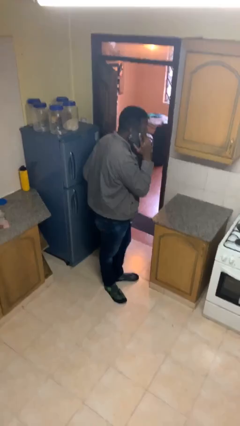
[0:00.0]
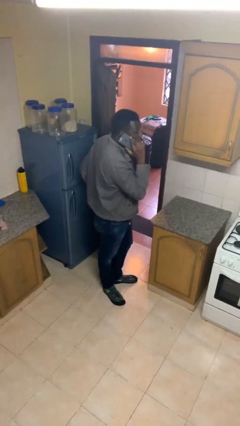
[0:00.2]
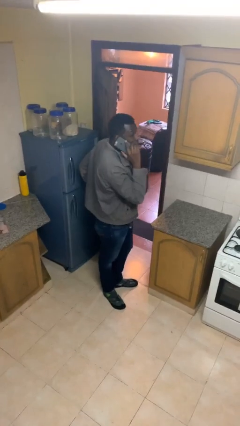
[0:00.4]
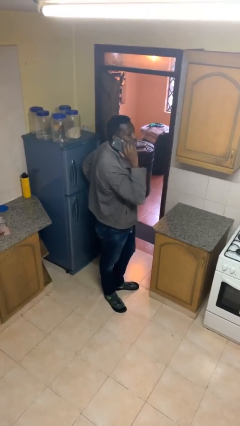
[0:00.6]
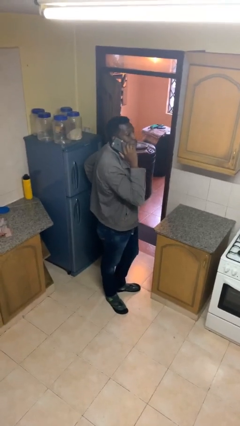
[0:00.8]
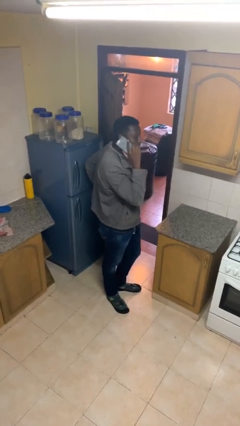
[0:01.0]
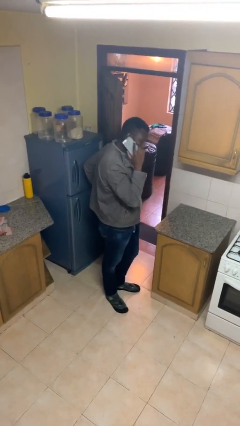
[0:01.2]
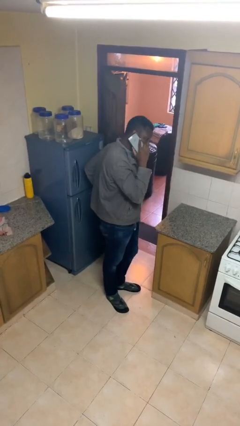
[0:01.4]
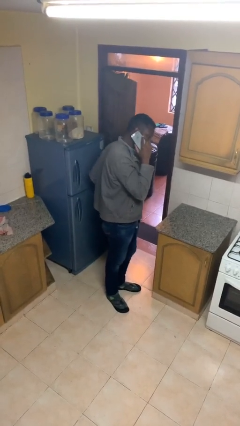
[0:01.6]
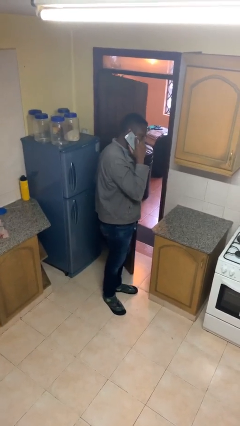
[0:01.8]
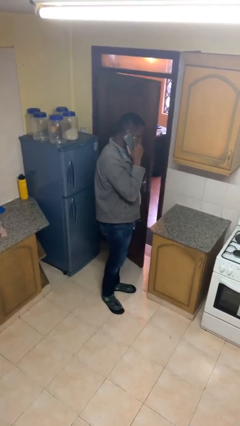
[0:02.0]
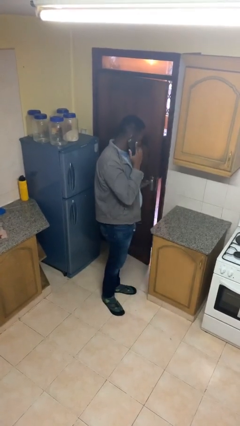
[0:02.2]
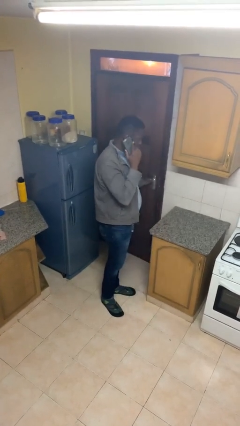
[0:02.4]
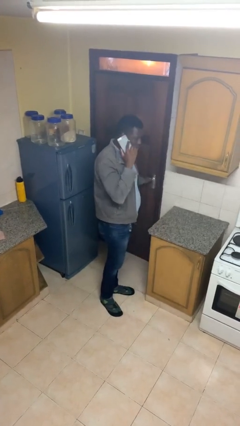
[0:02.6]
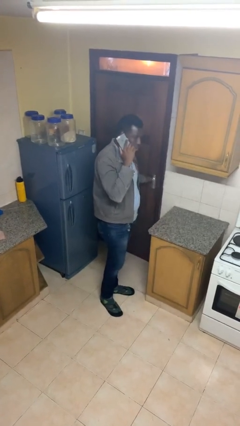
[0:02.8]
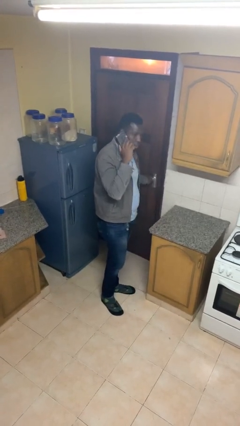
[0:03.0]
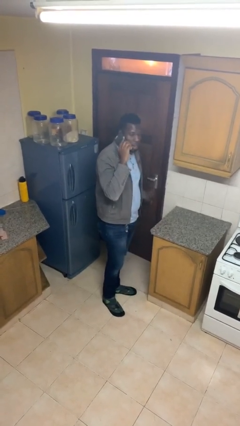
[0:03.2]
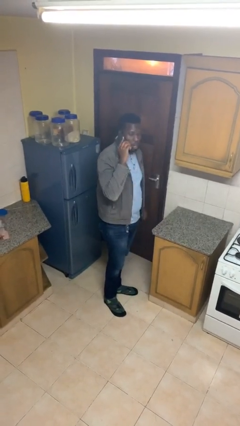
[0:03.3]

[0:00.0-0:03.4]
person closes facility door

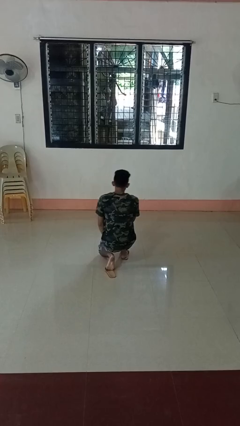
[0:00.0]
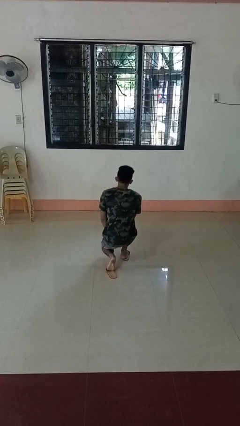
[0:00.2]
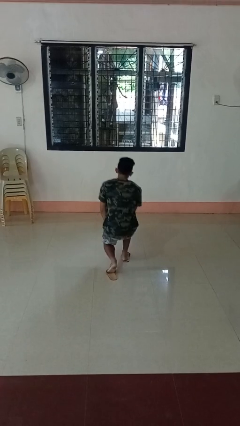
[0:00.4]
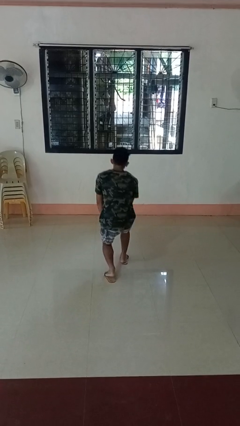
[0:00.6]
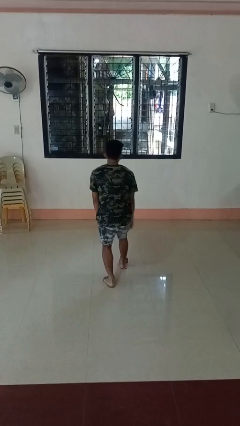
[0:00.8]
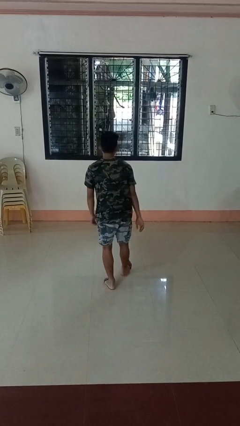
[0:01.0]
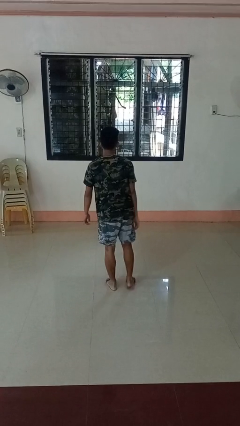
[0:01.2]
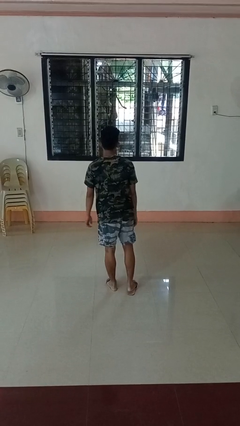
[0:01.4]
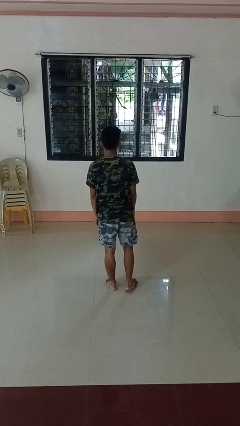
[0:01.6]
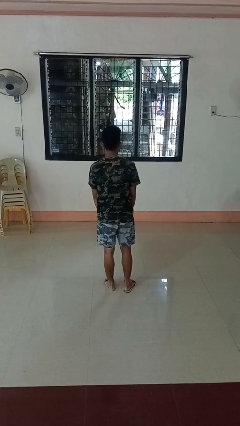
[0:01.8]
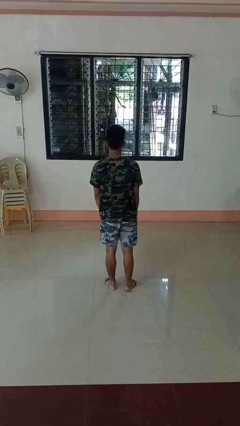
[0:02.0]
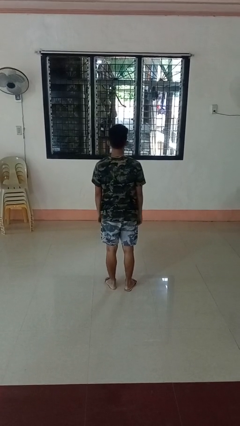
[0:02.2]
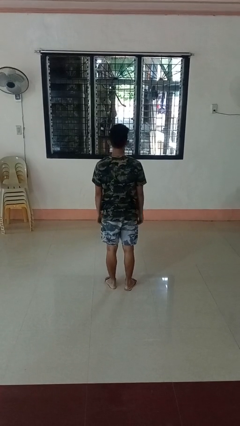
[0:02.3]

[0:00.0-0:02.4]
person stands up from floor

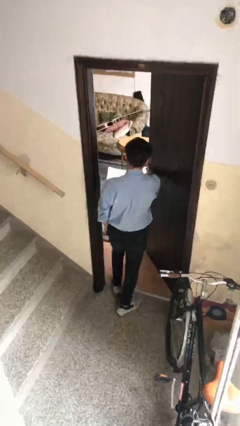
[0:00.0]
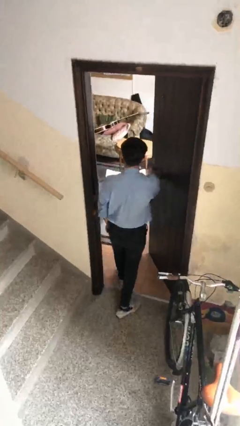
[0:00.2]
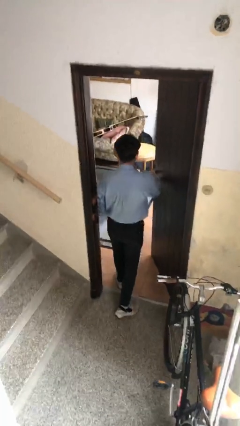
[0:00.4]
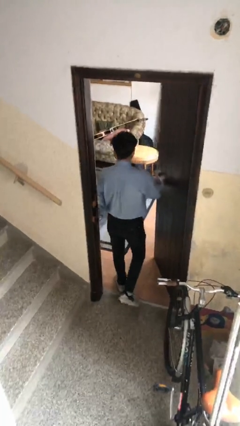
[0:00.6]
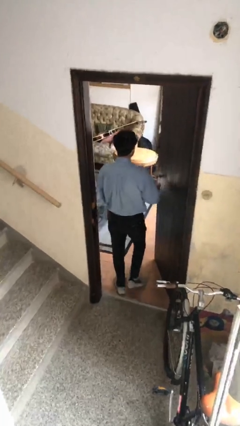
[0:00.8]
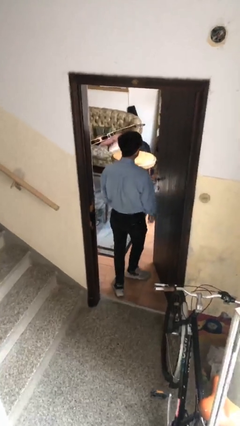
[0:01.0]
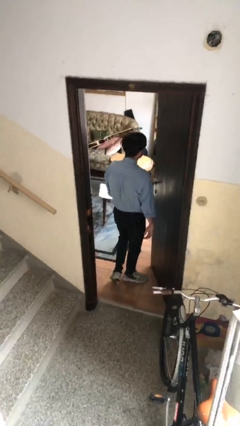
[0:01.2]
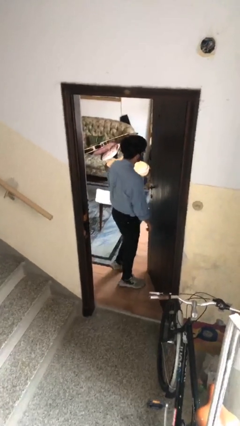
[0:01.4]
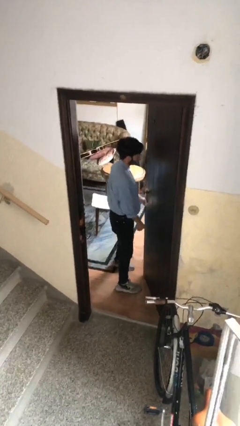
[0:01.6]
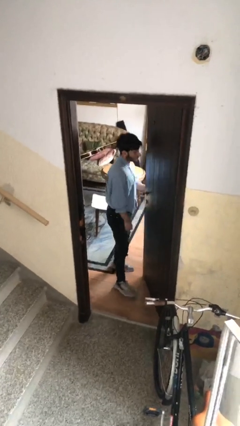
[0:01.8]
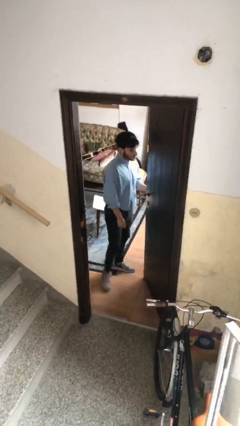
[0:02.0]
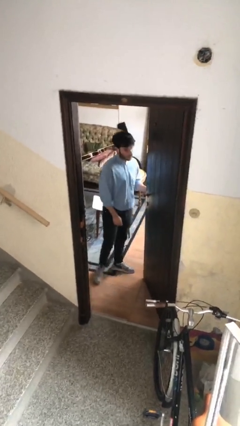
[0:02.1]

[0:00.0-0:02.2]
person exits scene through structure

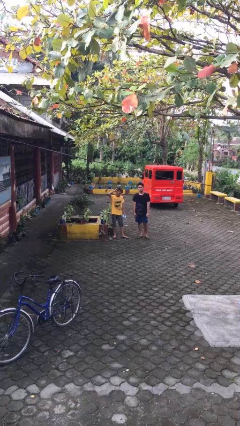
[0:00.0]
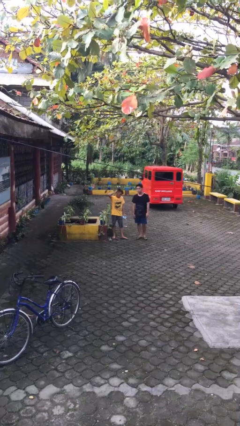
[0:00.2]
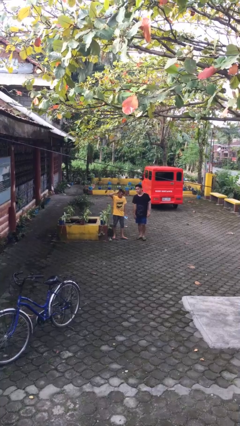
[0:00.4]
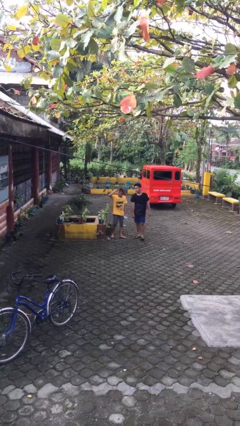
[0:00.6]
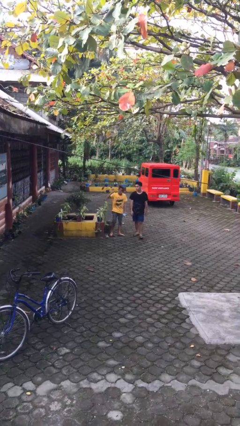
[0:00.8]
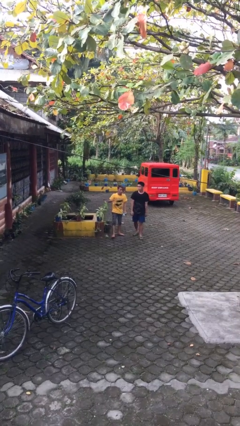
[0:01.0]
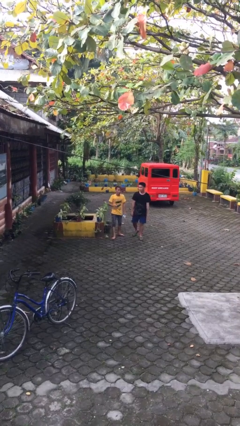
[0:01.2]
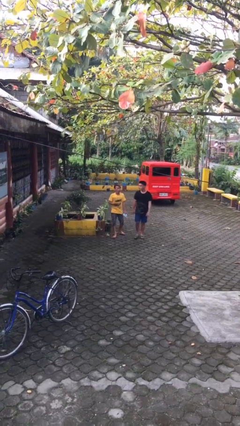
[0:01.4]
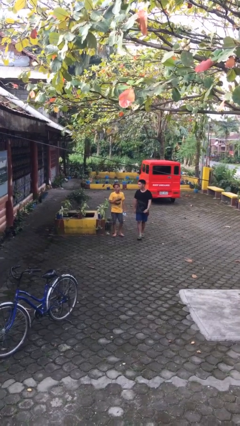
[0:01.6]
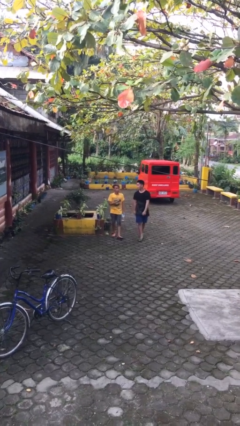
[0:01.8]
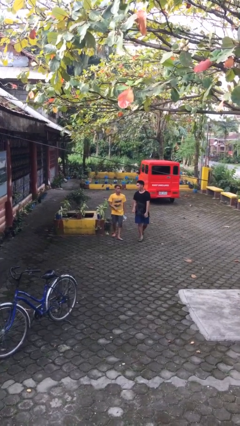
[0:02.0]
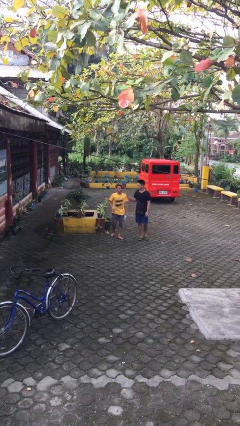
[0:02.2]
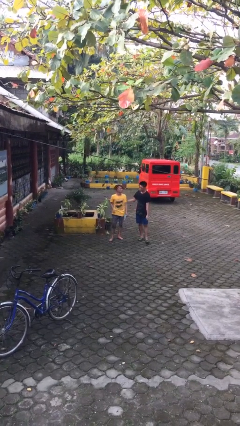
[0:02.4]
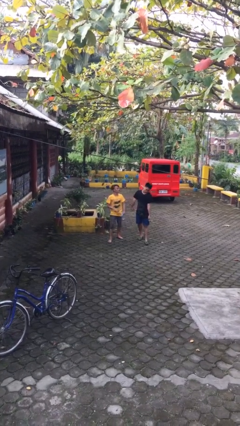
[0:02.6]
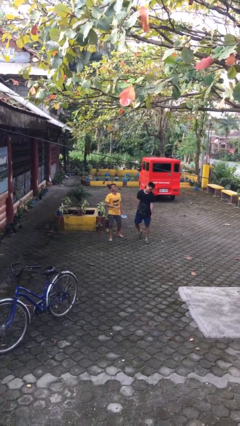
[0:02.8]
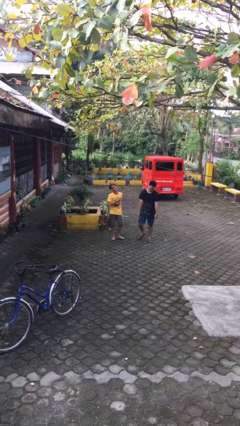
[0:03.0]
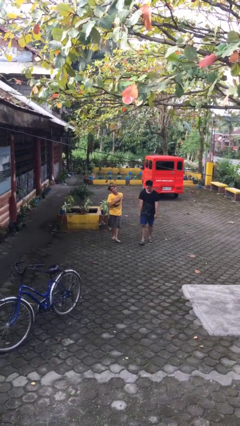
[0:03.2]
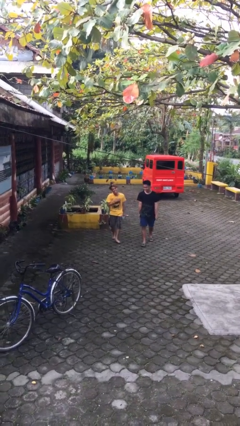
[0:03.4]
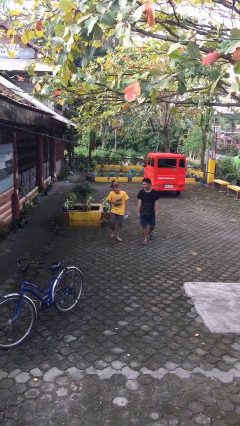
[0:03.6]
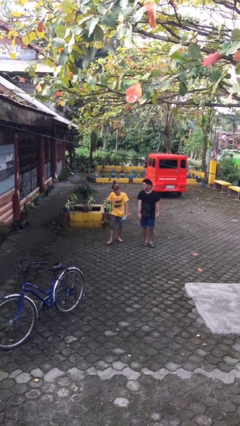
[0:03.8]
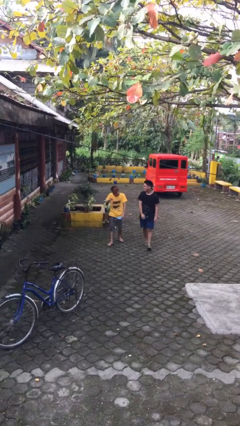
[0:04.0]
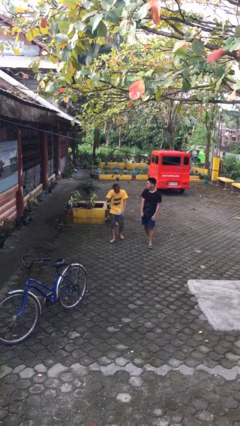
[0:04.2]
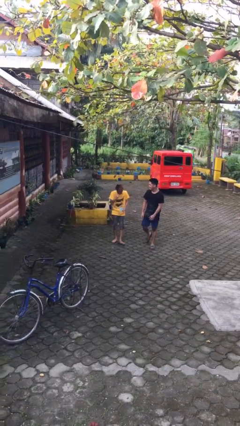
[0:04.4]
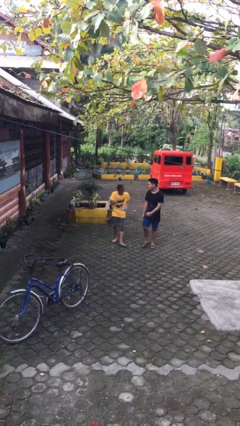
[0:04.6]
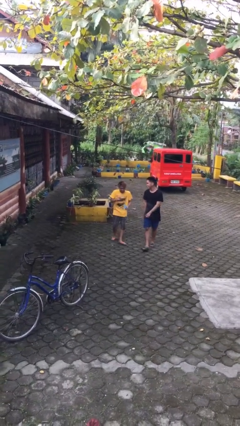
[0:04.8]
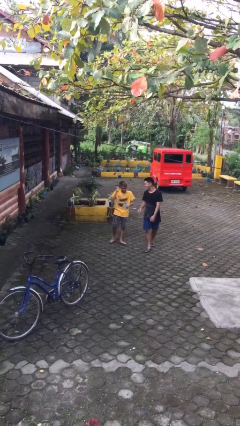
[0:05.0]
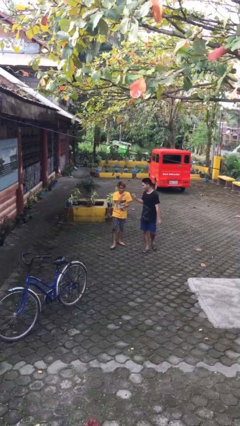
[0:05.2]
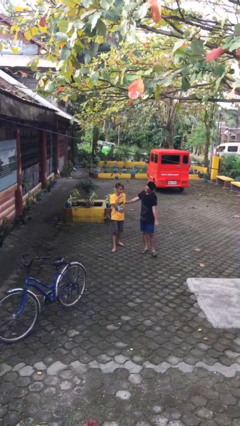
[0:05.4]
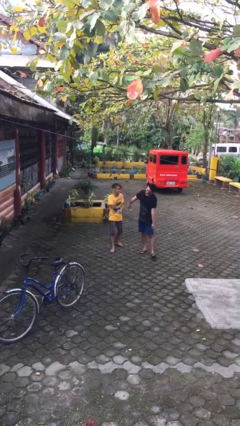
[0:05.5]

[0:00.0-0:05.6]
person talks to person

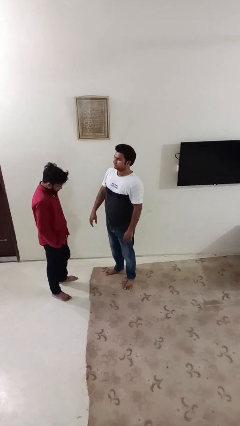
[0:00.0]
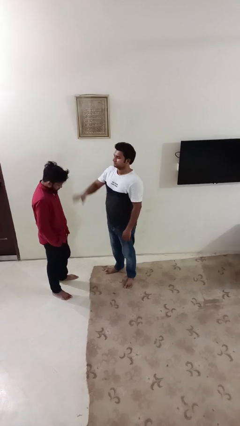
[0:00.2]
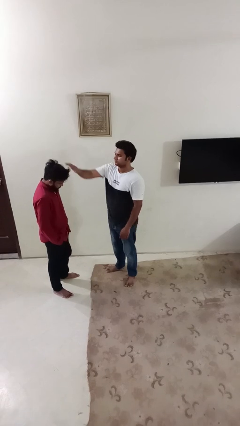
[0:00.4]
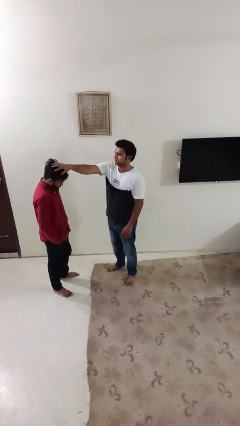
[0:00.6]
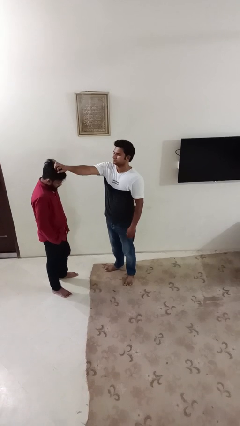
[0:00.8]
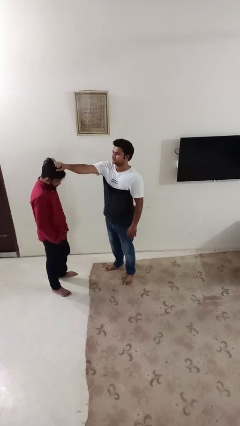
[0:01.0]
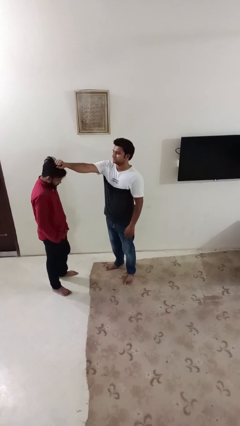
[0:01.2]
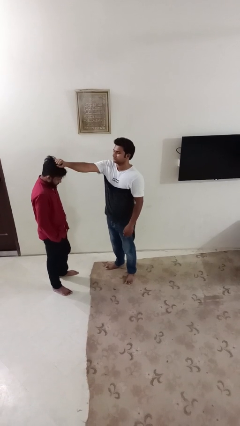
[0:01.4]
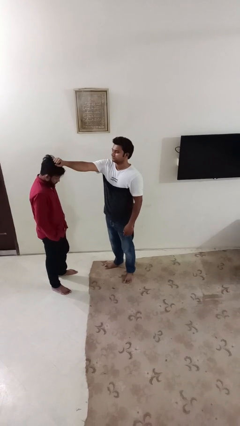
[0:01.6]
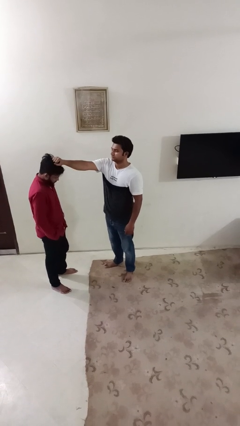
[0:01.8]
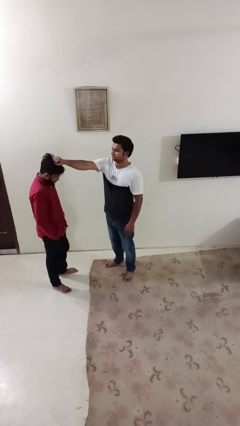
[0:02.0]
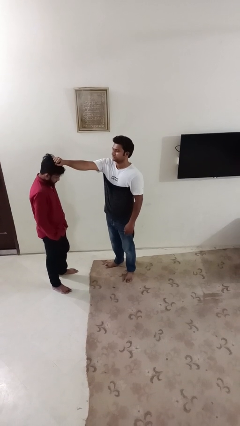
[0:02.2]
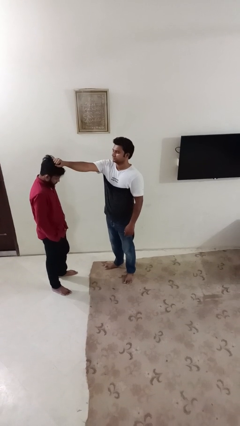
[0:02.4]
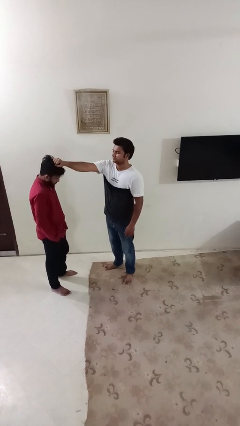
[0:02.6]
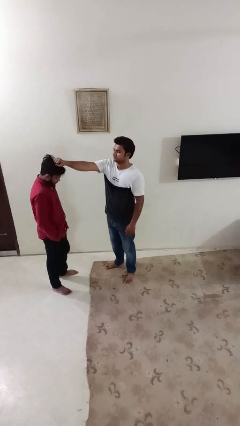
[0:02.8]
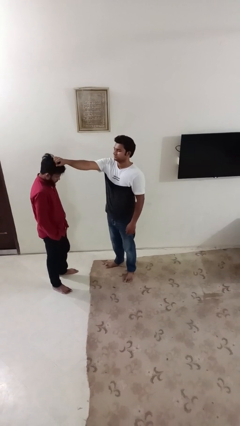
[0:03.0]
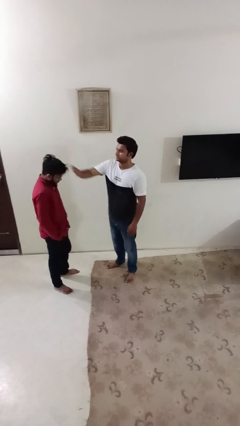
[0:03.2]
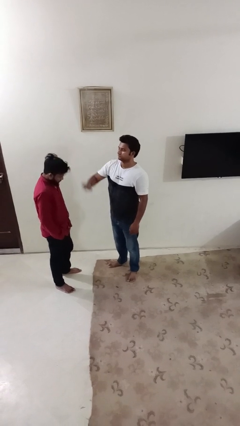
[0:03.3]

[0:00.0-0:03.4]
person grabs person by hair

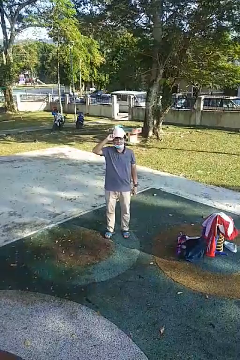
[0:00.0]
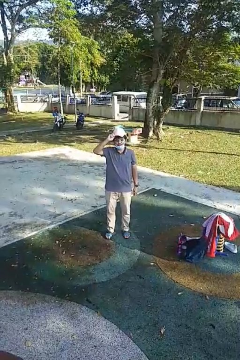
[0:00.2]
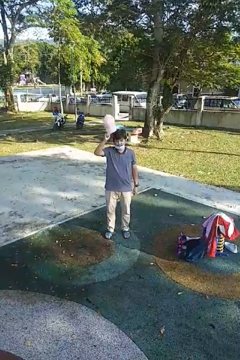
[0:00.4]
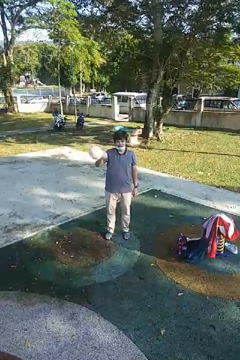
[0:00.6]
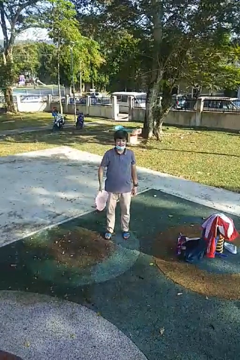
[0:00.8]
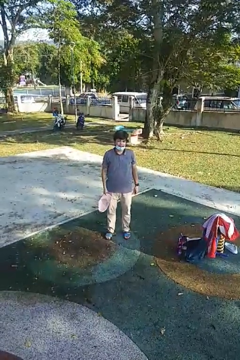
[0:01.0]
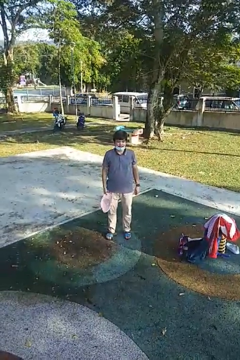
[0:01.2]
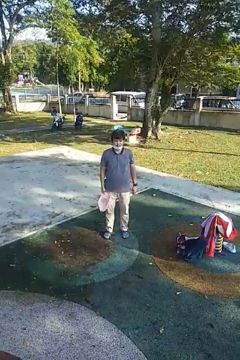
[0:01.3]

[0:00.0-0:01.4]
person takes off hat
